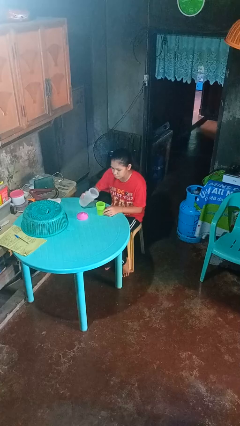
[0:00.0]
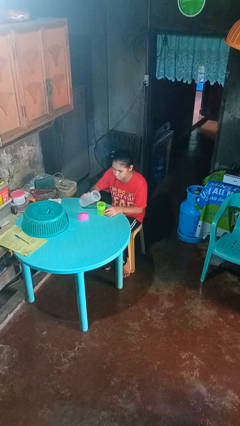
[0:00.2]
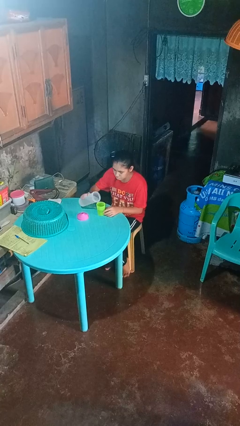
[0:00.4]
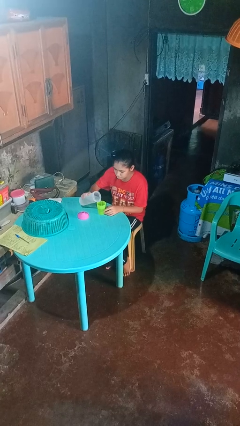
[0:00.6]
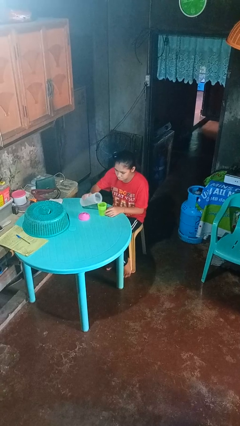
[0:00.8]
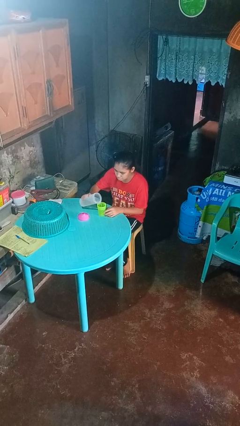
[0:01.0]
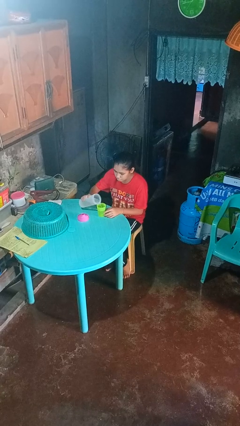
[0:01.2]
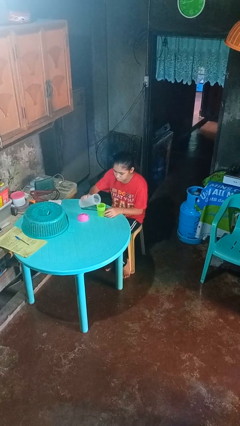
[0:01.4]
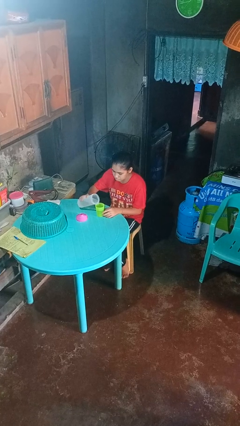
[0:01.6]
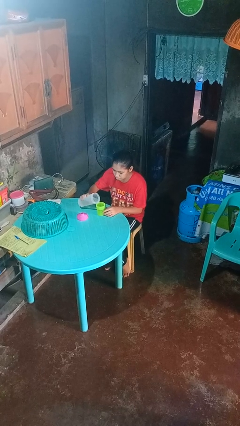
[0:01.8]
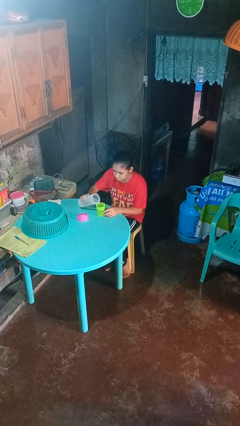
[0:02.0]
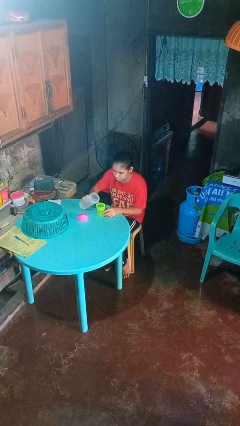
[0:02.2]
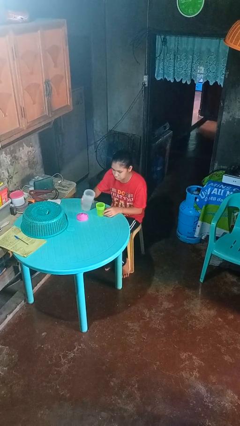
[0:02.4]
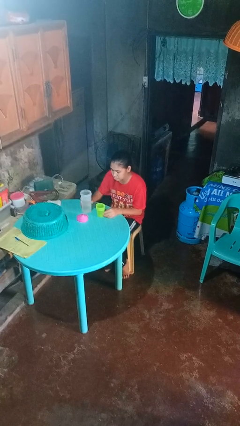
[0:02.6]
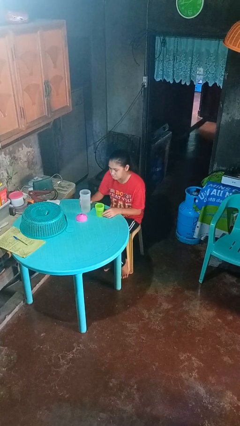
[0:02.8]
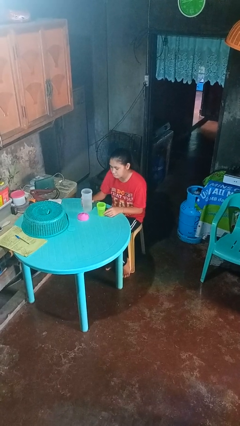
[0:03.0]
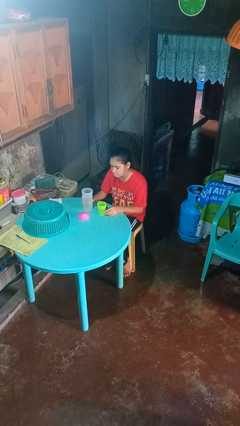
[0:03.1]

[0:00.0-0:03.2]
person pours liquid into cup

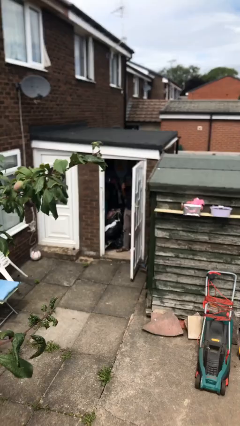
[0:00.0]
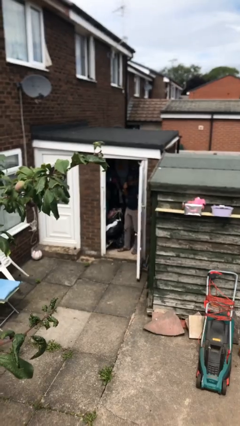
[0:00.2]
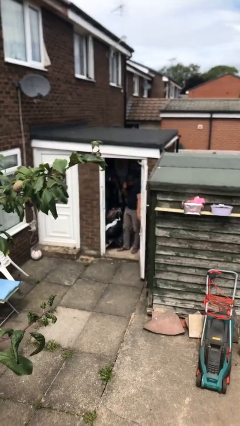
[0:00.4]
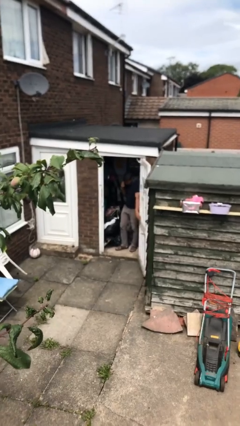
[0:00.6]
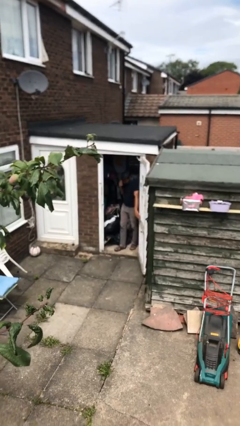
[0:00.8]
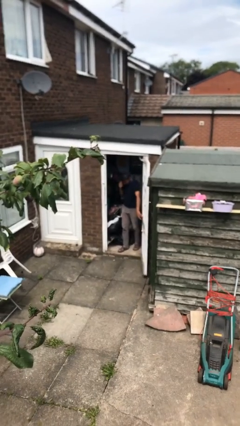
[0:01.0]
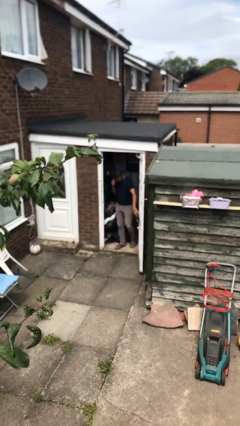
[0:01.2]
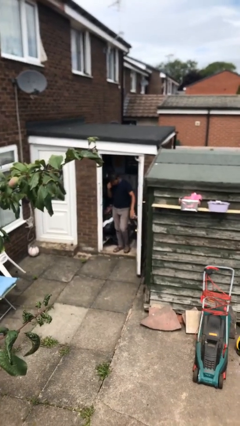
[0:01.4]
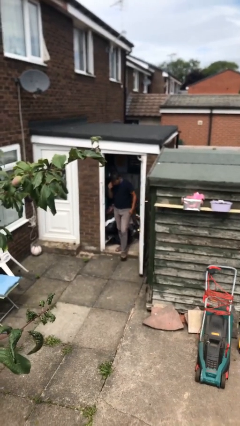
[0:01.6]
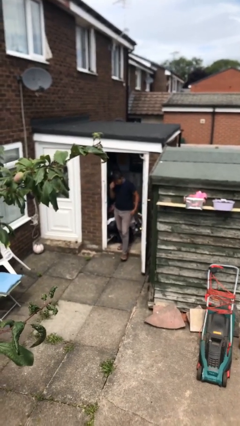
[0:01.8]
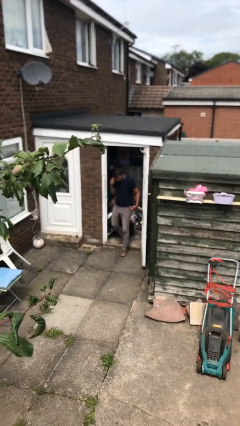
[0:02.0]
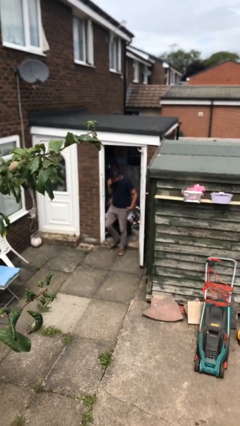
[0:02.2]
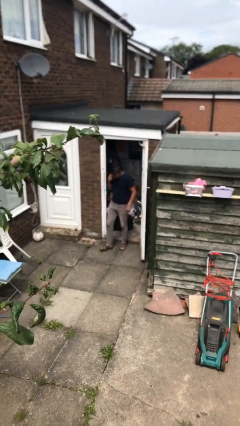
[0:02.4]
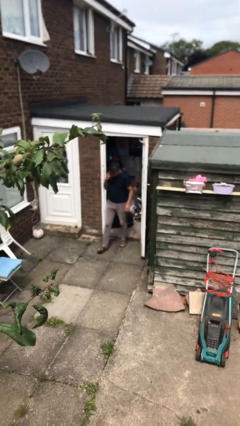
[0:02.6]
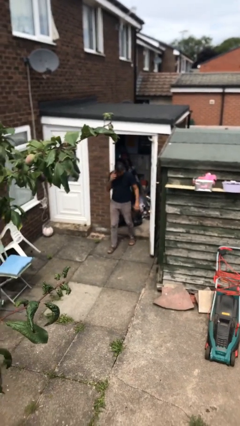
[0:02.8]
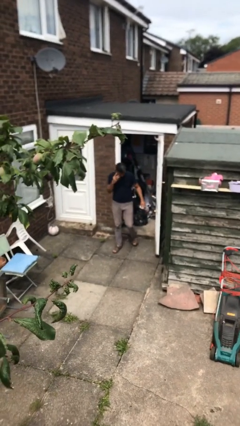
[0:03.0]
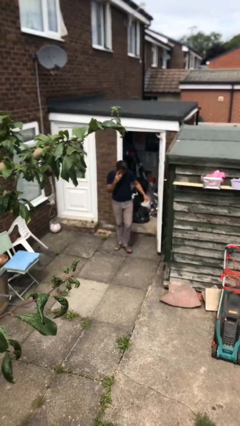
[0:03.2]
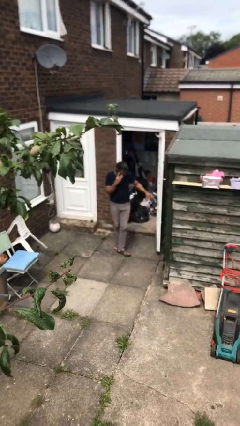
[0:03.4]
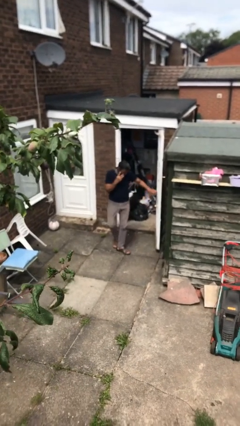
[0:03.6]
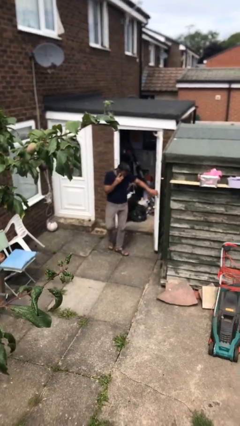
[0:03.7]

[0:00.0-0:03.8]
person enters scene through structure

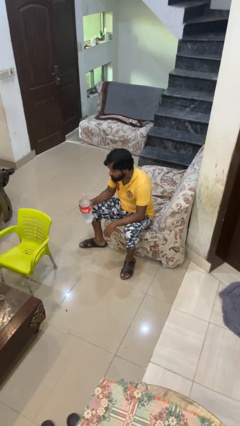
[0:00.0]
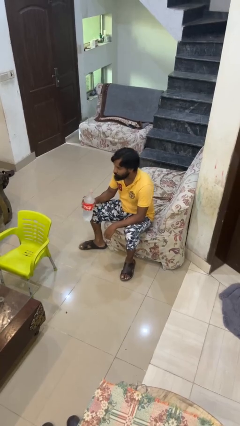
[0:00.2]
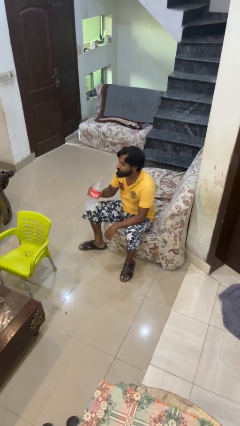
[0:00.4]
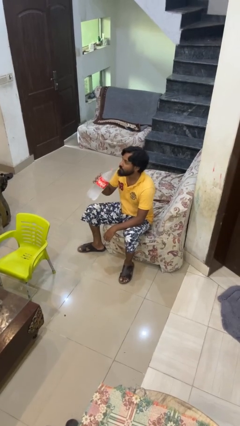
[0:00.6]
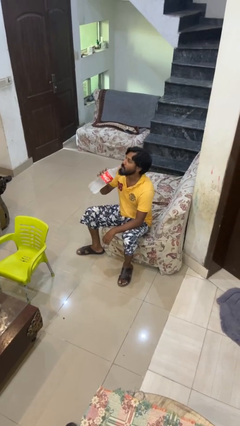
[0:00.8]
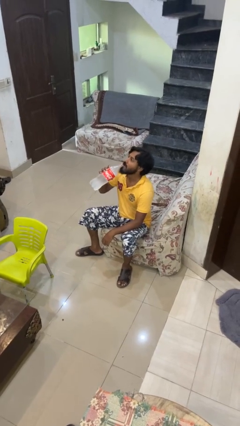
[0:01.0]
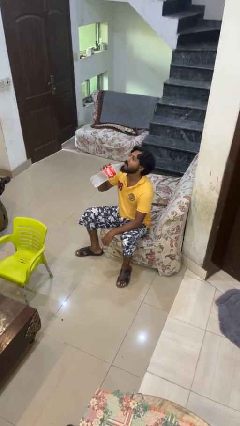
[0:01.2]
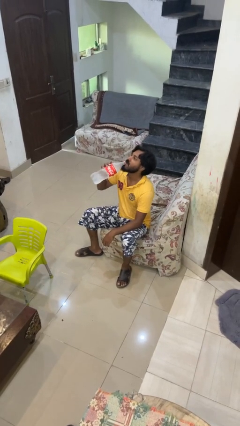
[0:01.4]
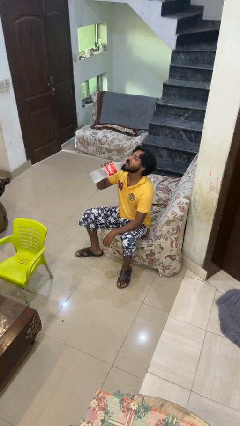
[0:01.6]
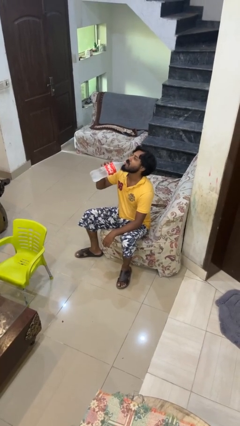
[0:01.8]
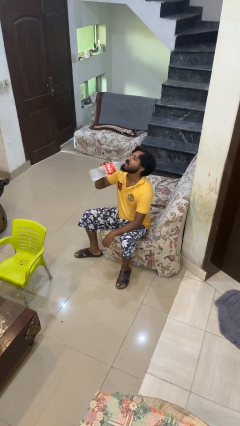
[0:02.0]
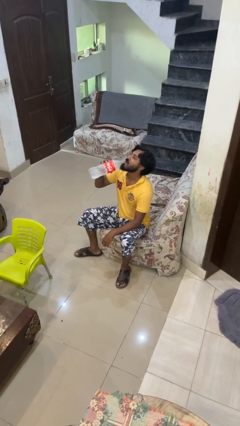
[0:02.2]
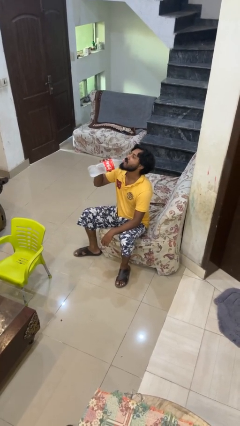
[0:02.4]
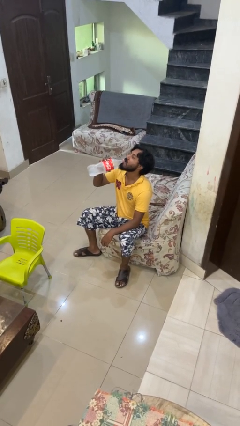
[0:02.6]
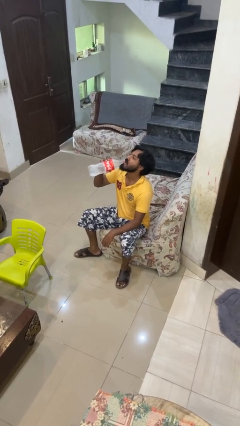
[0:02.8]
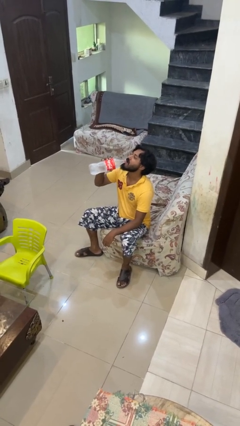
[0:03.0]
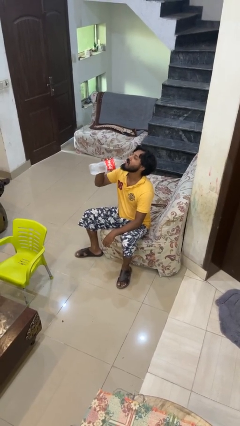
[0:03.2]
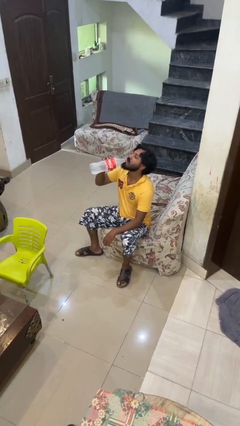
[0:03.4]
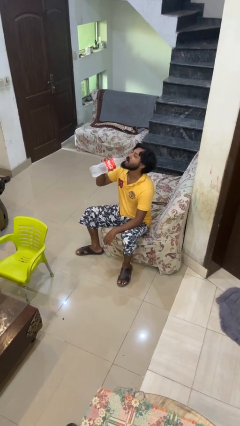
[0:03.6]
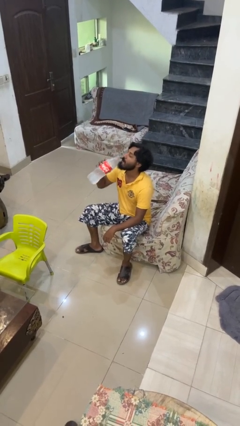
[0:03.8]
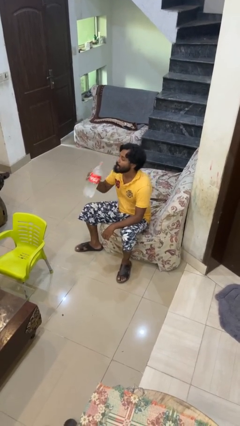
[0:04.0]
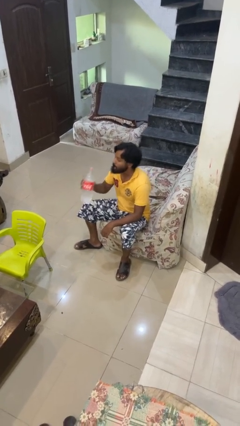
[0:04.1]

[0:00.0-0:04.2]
person drinks from bottle

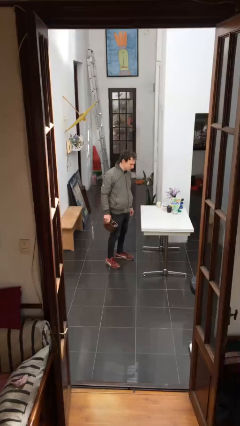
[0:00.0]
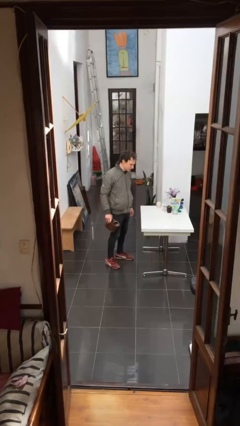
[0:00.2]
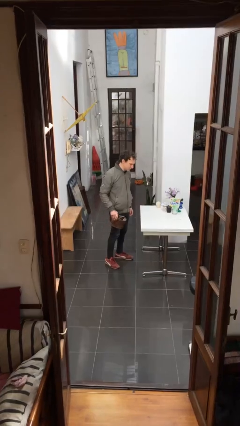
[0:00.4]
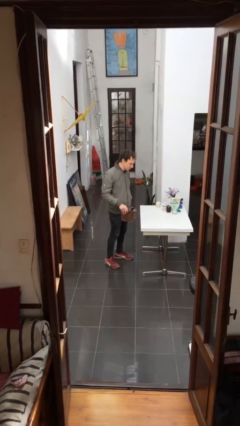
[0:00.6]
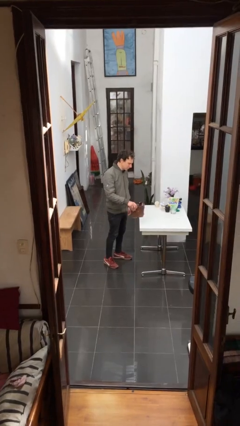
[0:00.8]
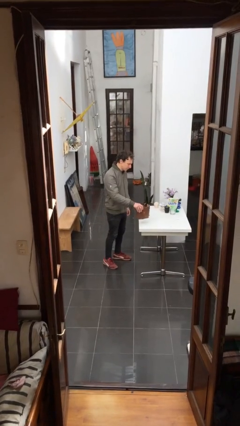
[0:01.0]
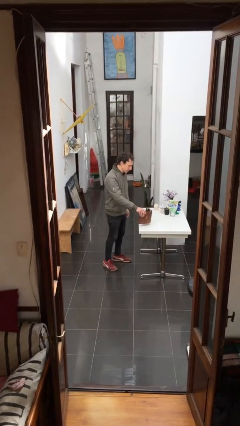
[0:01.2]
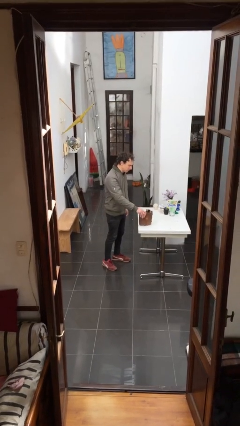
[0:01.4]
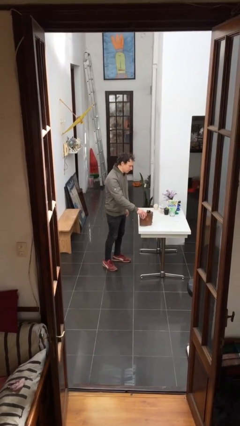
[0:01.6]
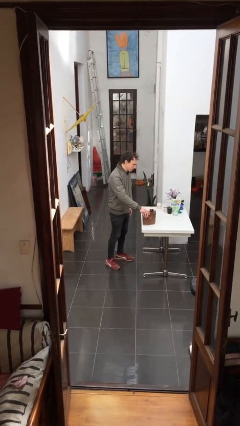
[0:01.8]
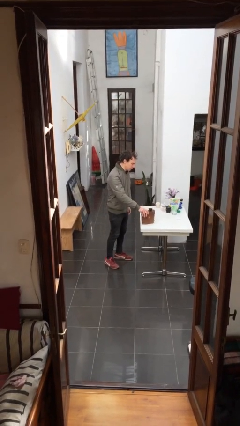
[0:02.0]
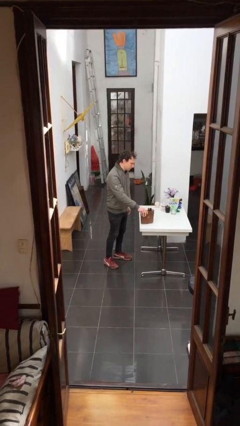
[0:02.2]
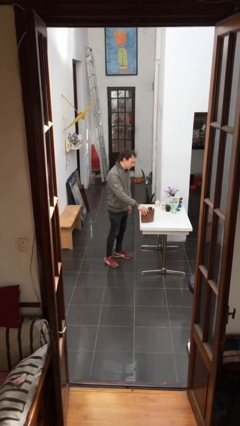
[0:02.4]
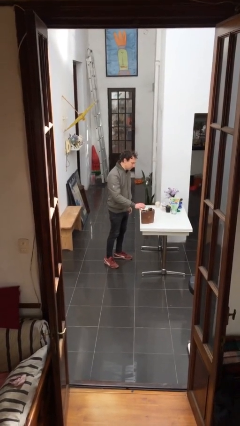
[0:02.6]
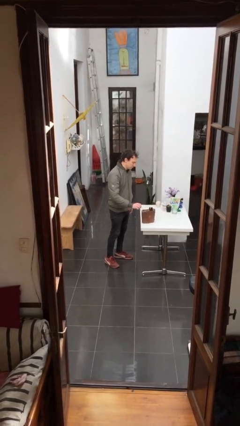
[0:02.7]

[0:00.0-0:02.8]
person puts down object on table

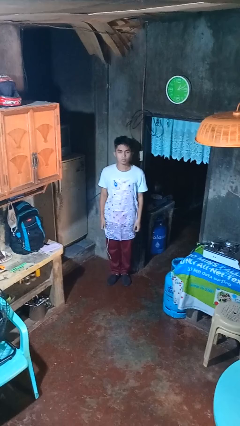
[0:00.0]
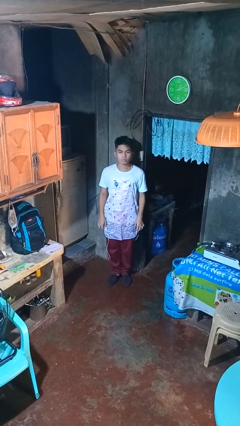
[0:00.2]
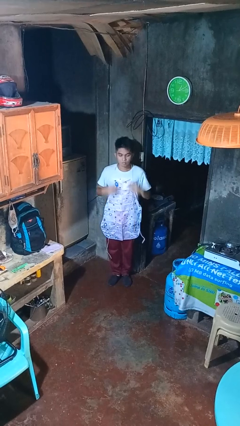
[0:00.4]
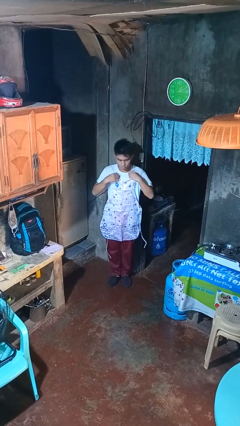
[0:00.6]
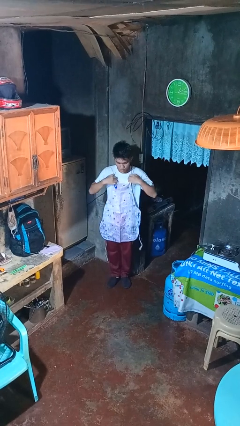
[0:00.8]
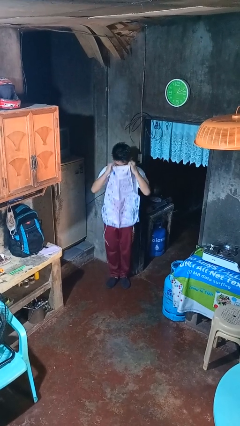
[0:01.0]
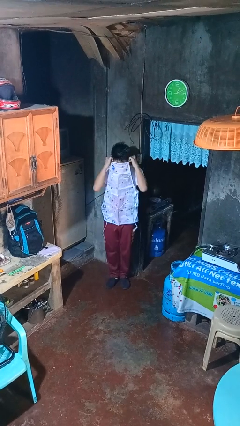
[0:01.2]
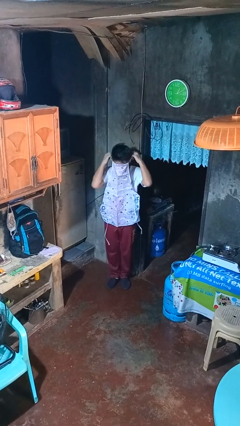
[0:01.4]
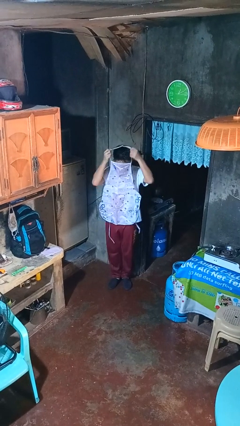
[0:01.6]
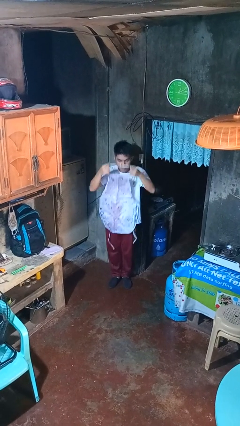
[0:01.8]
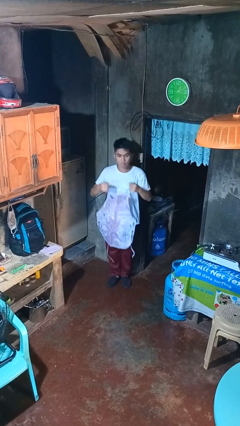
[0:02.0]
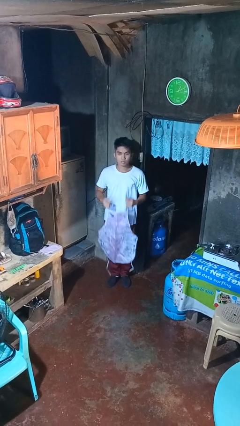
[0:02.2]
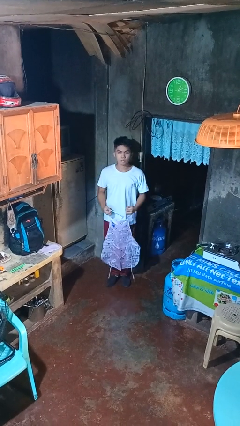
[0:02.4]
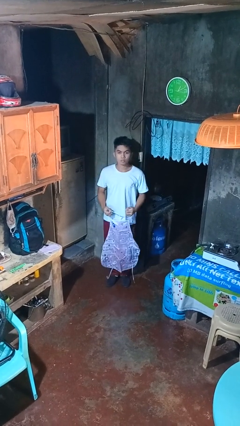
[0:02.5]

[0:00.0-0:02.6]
person takes off apron

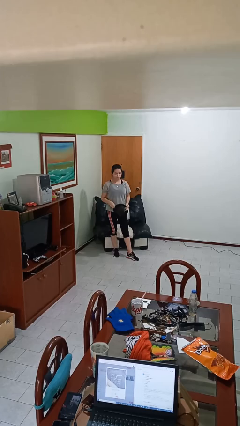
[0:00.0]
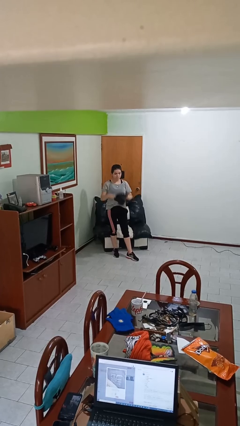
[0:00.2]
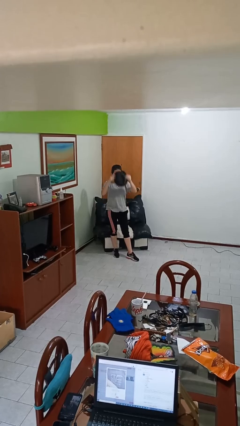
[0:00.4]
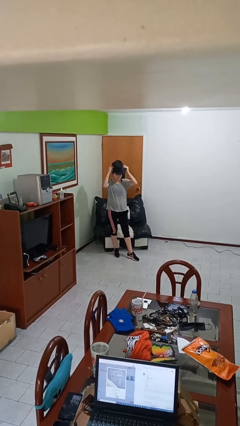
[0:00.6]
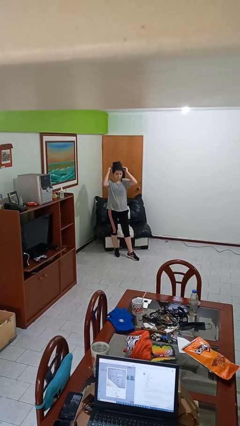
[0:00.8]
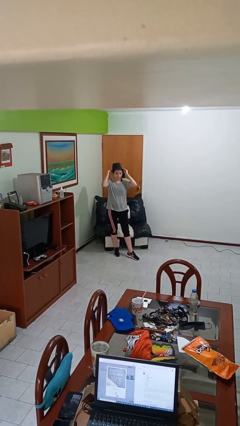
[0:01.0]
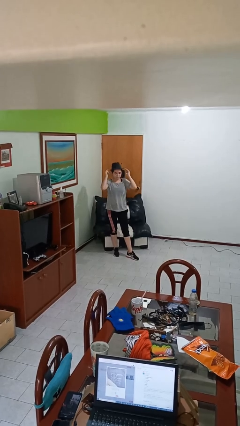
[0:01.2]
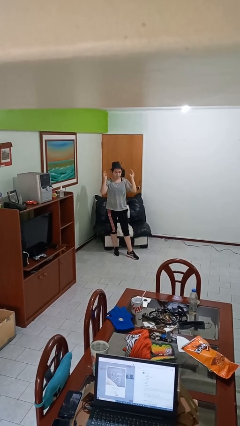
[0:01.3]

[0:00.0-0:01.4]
person puts on hat
